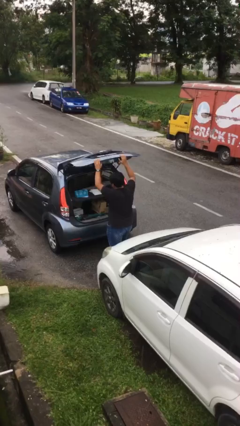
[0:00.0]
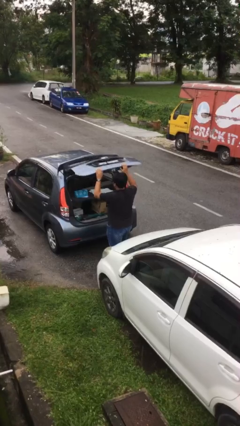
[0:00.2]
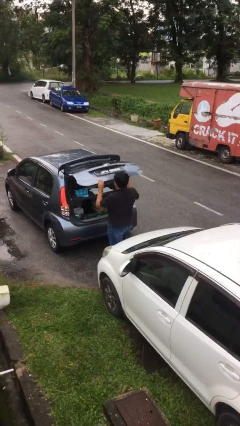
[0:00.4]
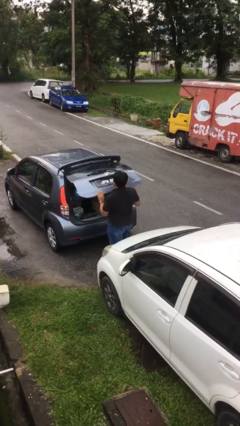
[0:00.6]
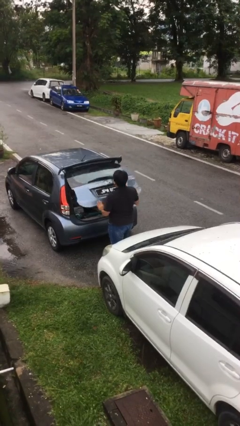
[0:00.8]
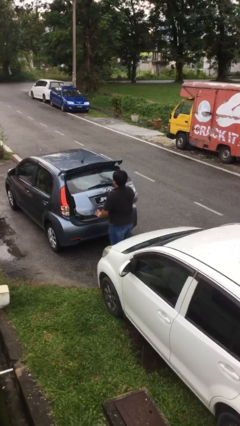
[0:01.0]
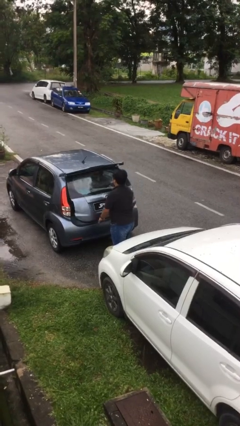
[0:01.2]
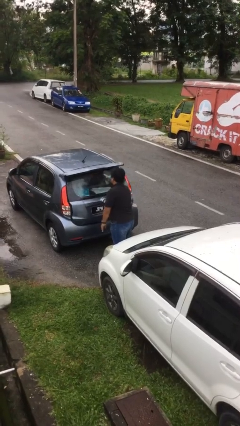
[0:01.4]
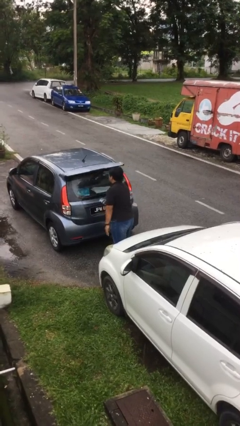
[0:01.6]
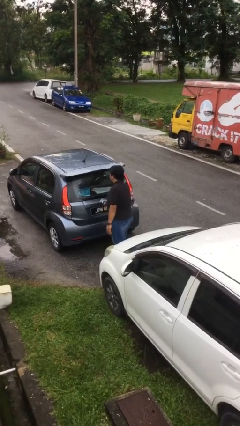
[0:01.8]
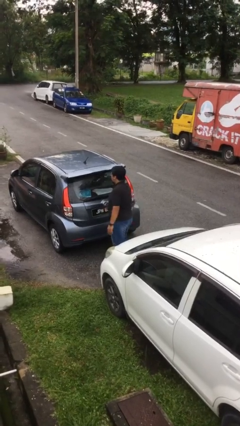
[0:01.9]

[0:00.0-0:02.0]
person closes car trunk

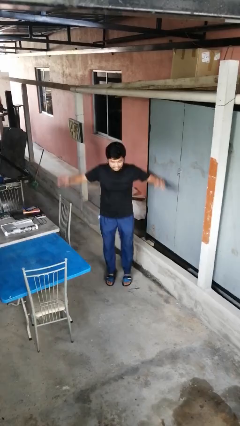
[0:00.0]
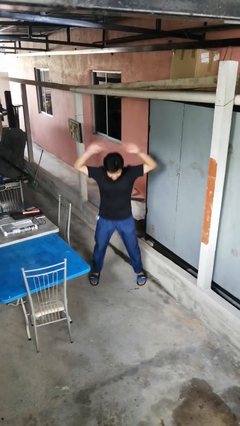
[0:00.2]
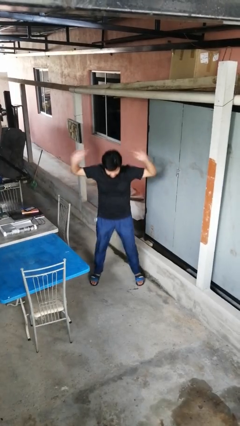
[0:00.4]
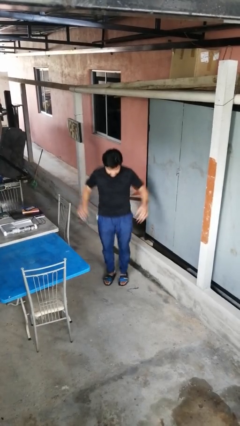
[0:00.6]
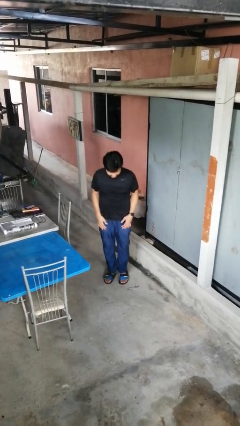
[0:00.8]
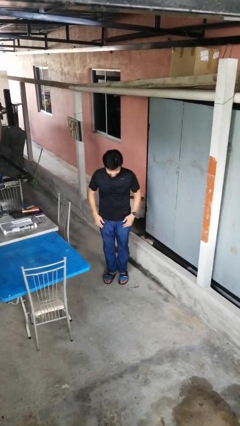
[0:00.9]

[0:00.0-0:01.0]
person exercises with jumping jacks

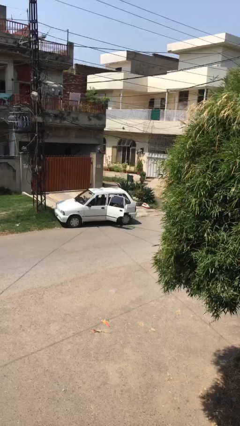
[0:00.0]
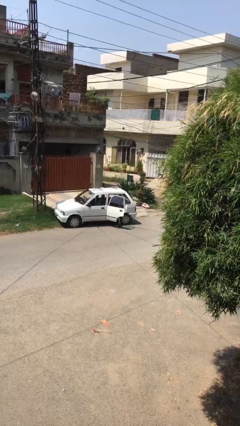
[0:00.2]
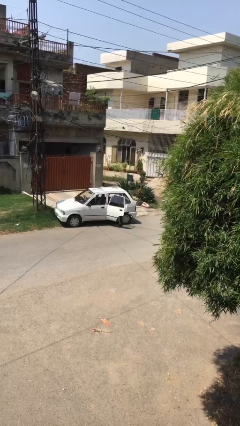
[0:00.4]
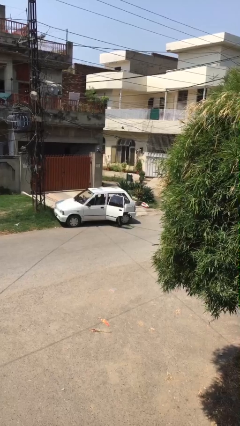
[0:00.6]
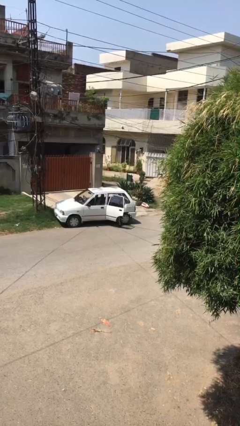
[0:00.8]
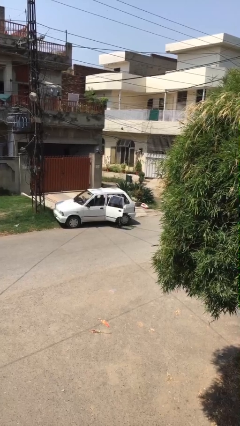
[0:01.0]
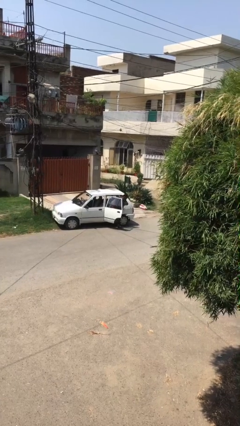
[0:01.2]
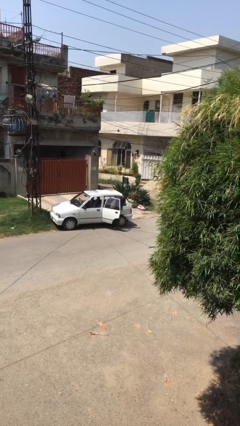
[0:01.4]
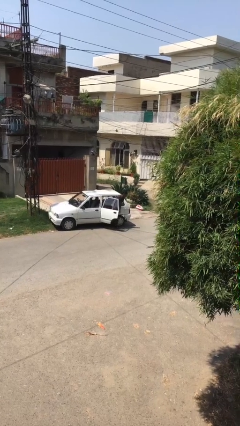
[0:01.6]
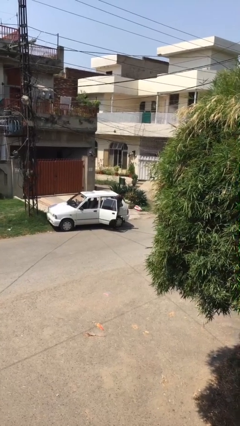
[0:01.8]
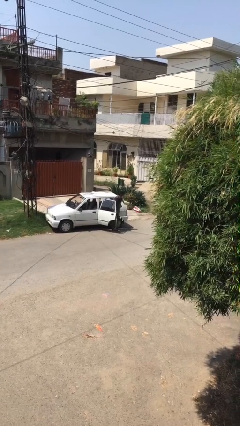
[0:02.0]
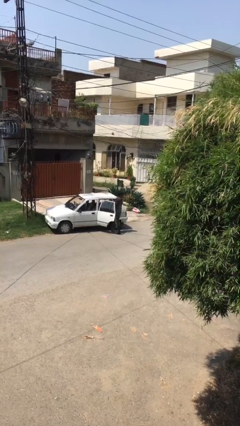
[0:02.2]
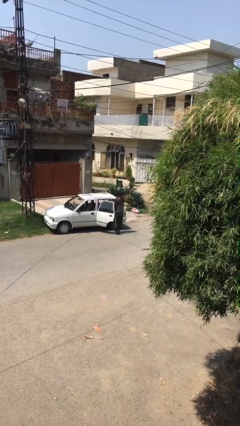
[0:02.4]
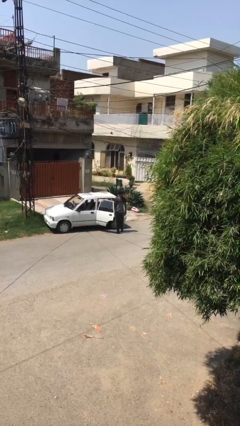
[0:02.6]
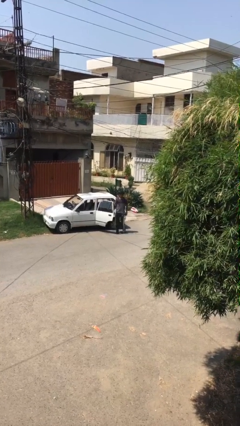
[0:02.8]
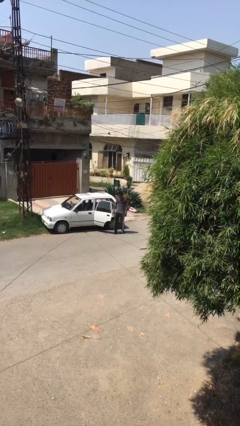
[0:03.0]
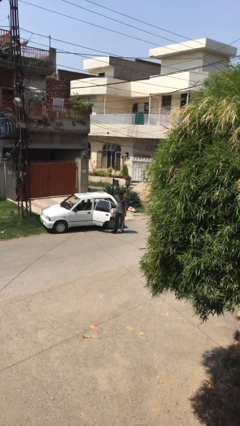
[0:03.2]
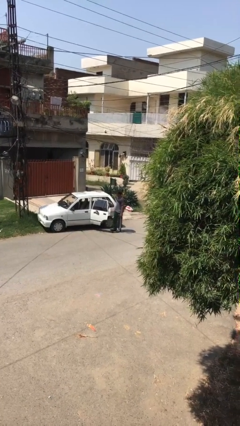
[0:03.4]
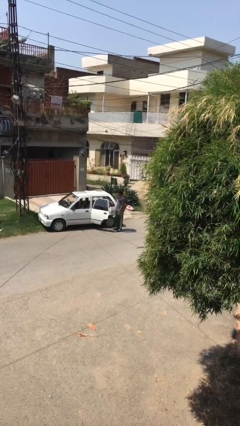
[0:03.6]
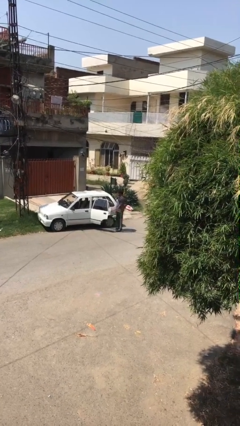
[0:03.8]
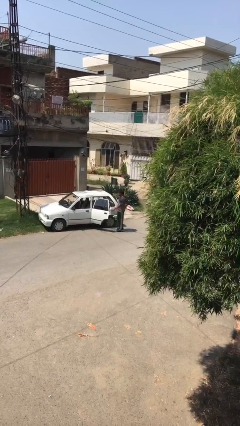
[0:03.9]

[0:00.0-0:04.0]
person exits car

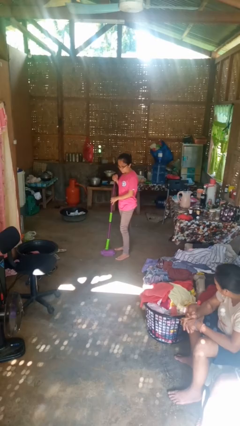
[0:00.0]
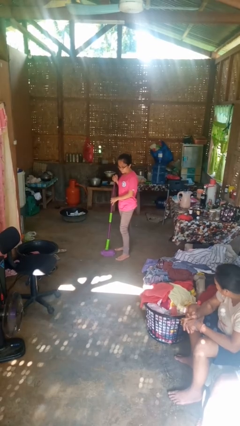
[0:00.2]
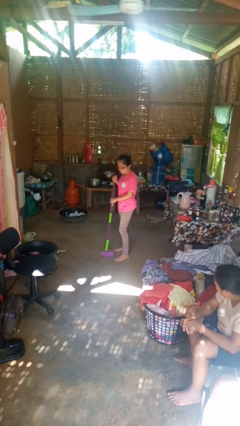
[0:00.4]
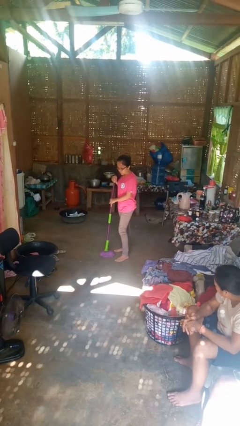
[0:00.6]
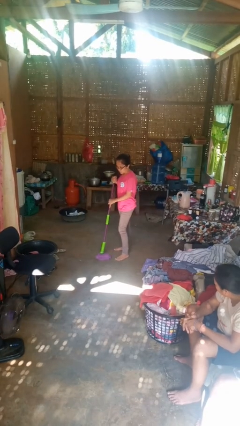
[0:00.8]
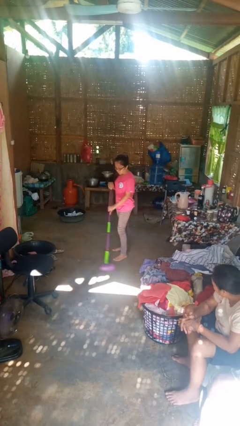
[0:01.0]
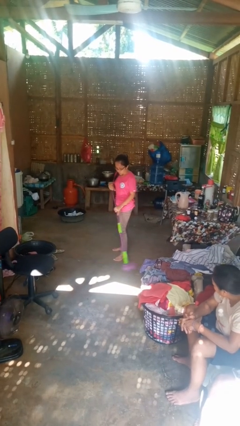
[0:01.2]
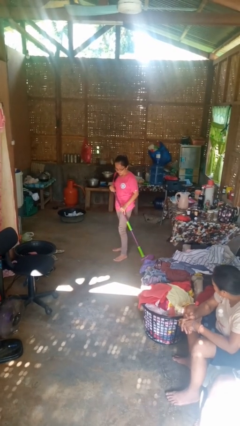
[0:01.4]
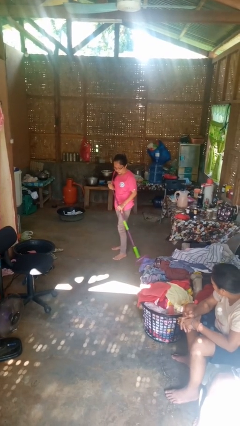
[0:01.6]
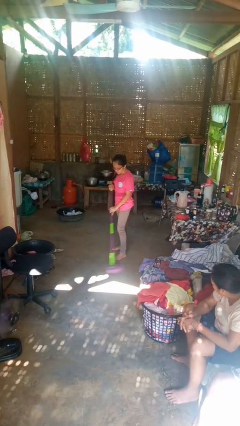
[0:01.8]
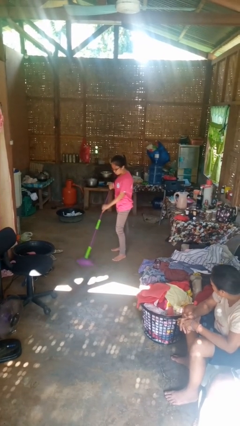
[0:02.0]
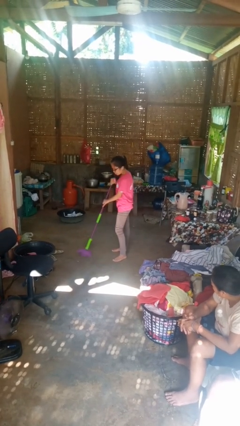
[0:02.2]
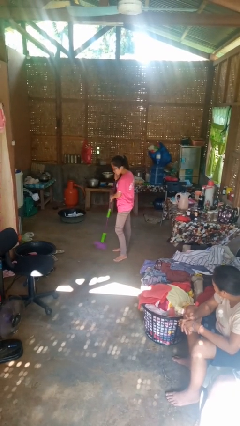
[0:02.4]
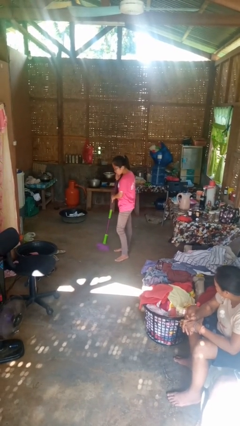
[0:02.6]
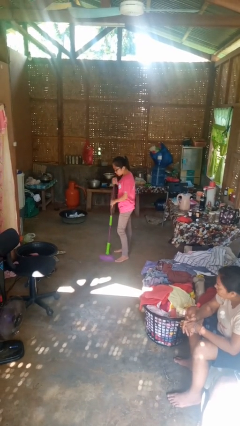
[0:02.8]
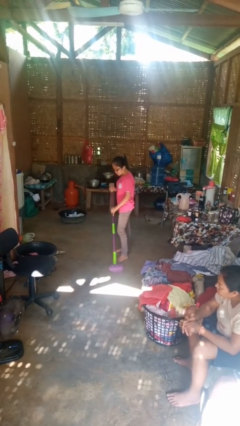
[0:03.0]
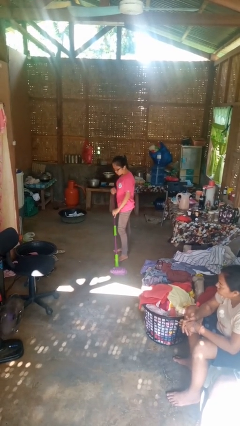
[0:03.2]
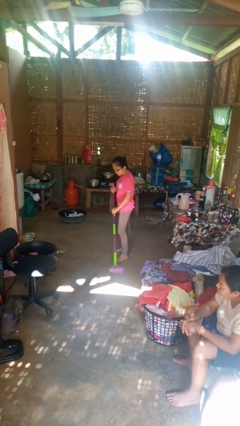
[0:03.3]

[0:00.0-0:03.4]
person mops

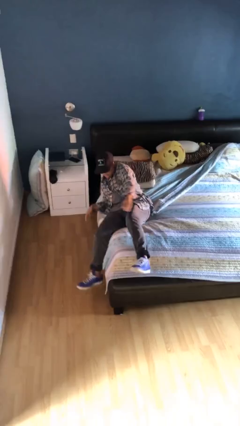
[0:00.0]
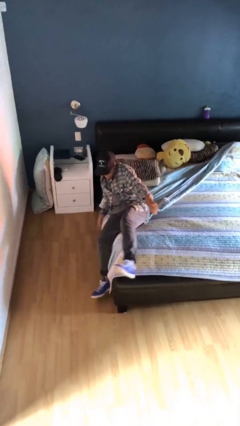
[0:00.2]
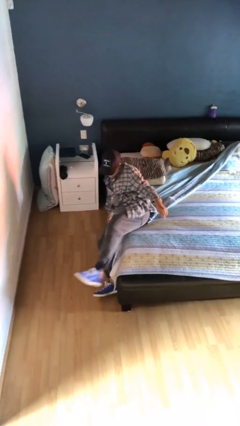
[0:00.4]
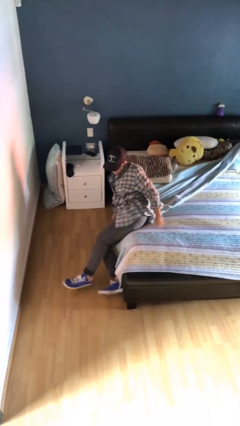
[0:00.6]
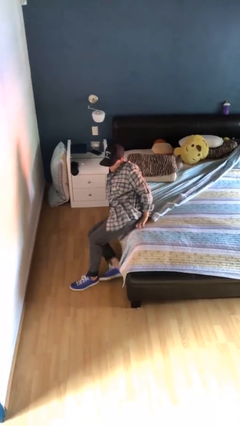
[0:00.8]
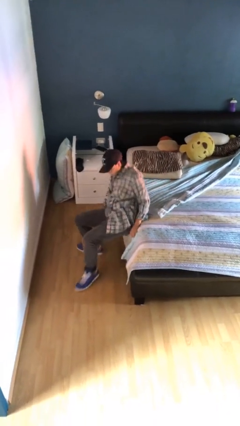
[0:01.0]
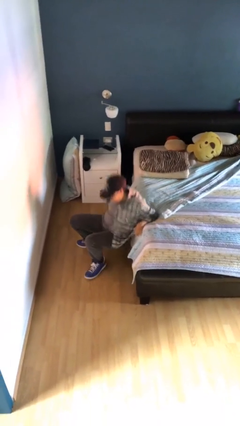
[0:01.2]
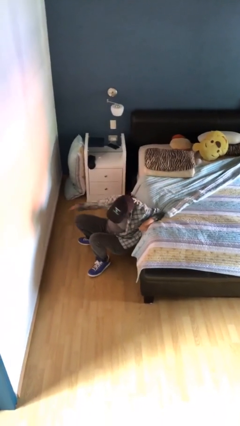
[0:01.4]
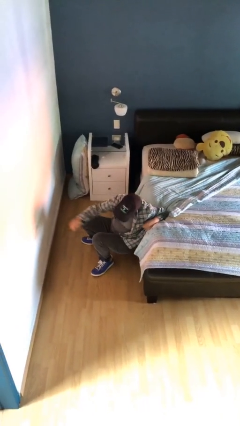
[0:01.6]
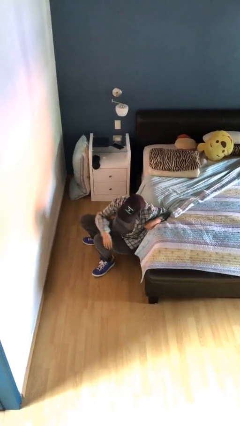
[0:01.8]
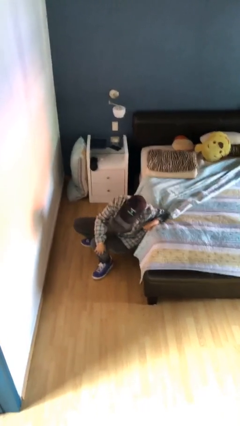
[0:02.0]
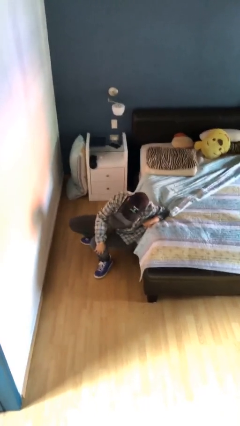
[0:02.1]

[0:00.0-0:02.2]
person falls from bed

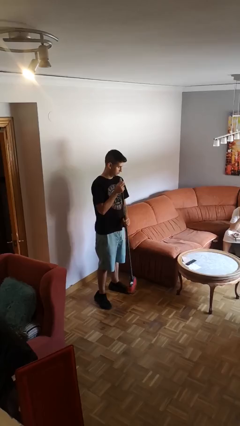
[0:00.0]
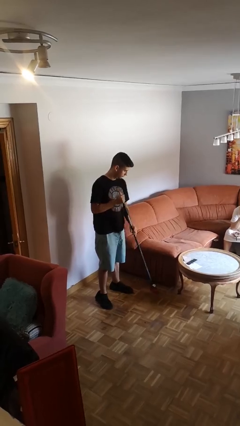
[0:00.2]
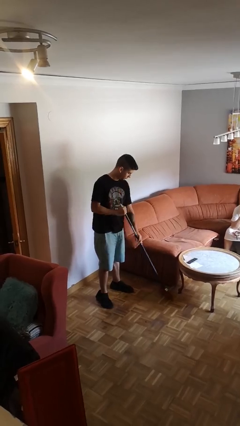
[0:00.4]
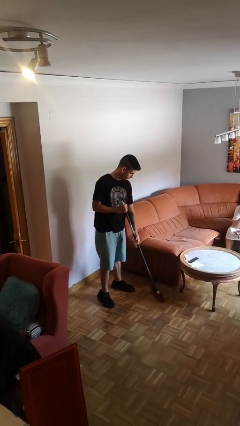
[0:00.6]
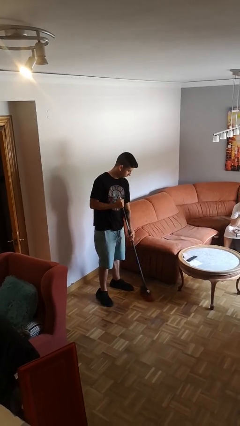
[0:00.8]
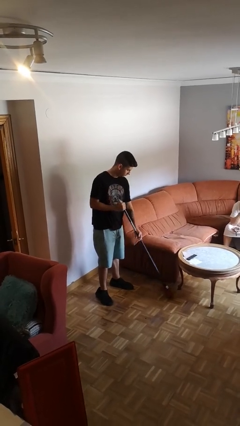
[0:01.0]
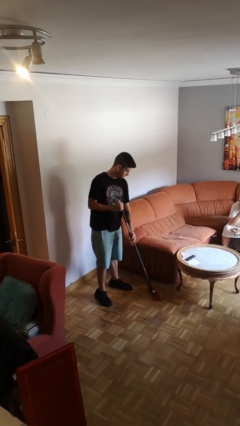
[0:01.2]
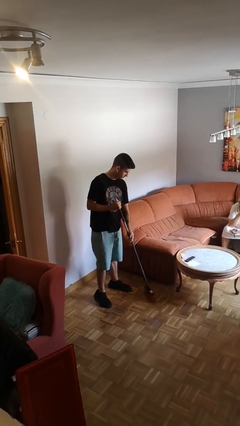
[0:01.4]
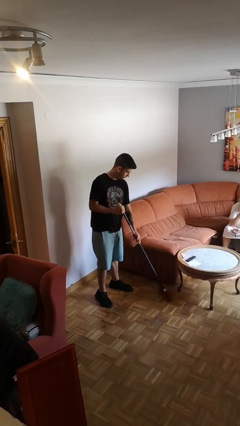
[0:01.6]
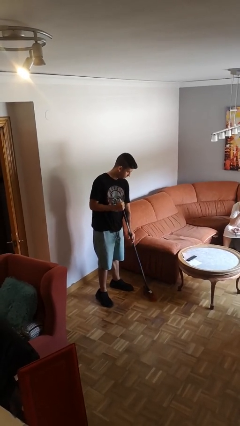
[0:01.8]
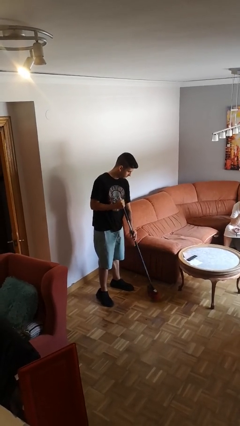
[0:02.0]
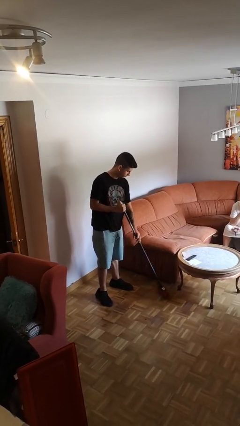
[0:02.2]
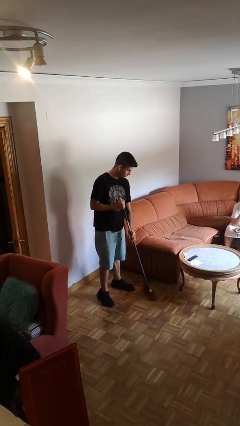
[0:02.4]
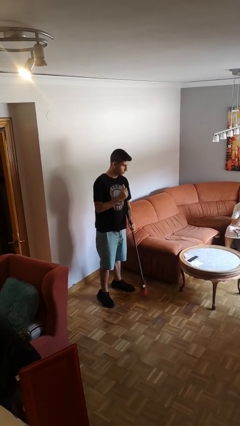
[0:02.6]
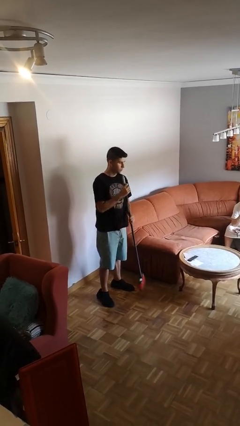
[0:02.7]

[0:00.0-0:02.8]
person sweeps floor

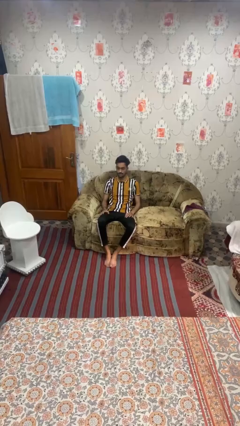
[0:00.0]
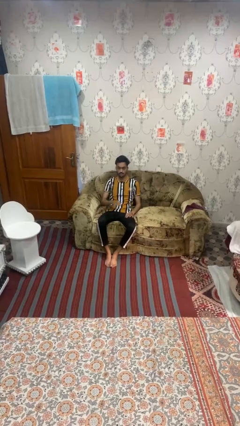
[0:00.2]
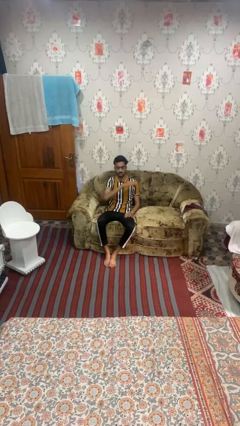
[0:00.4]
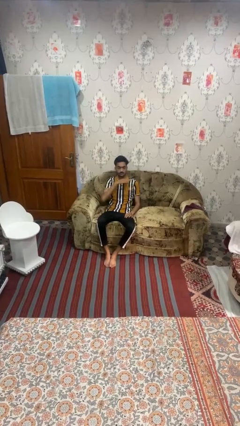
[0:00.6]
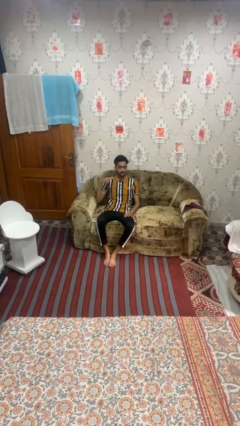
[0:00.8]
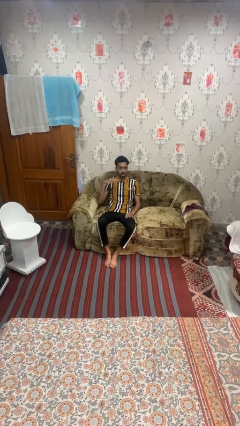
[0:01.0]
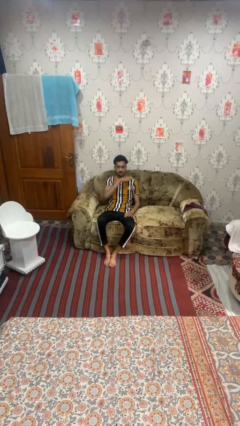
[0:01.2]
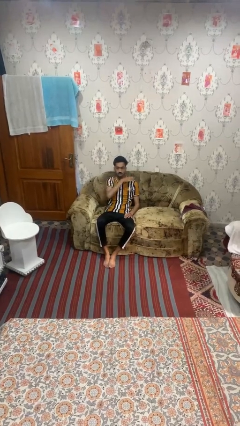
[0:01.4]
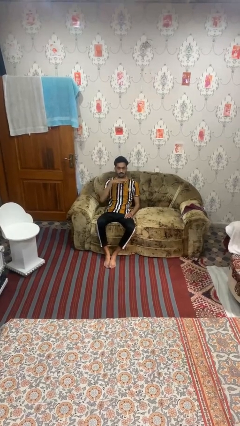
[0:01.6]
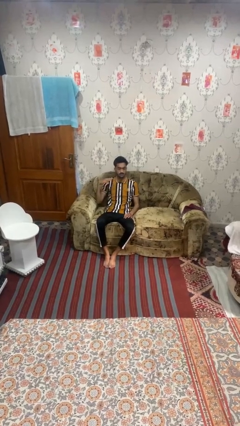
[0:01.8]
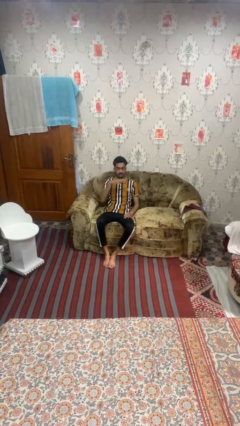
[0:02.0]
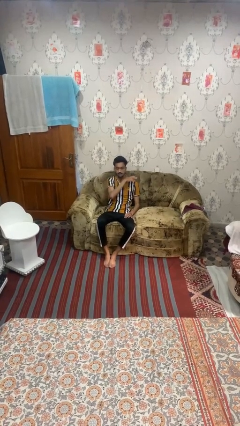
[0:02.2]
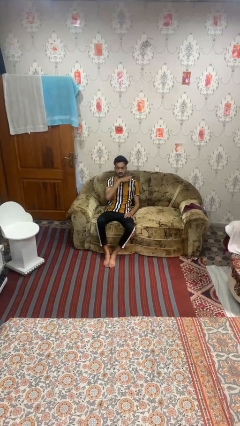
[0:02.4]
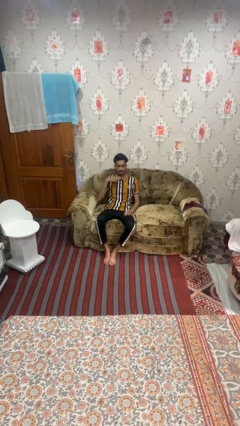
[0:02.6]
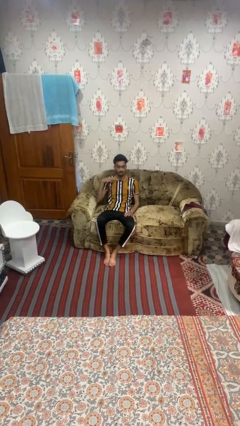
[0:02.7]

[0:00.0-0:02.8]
person gestures cut
